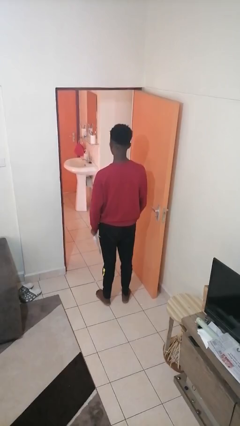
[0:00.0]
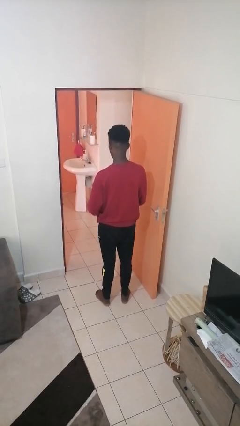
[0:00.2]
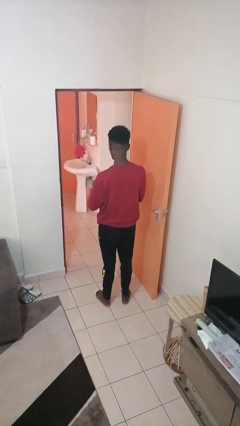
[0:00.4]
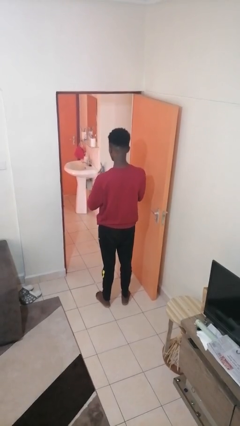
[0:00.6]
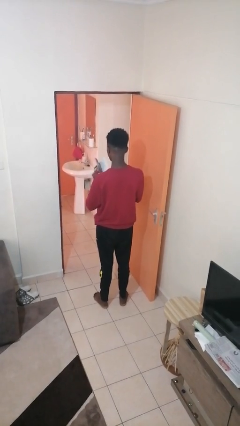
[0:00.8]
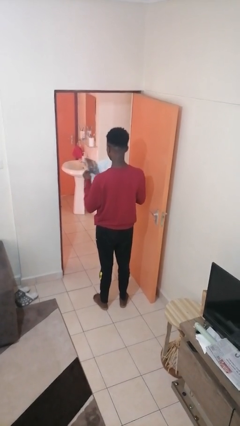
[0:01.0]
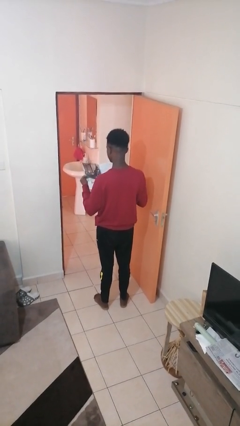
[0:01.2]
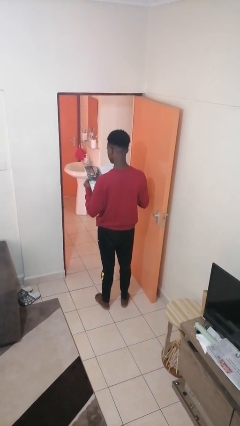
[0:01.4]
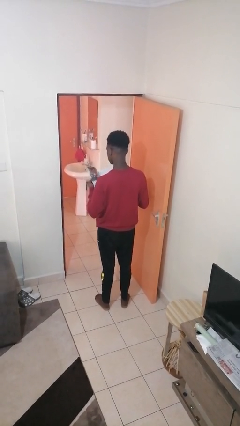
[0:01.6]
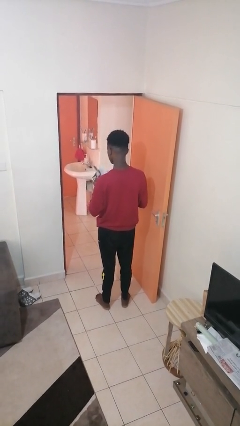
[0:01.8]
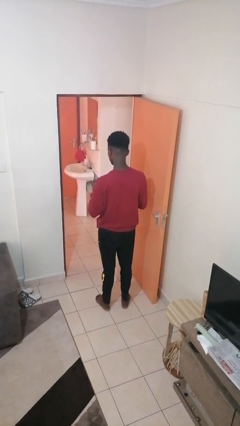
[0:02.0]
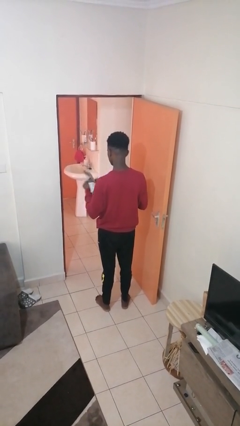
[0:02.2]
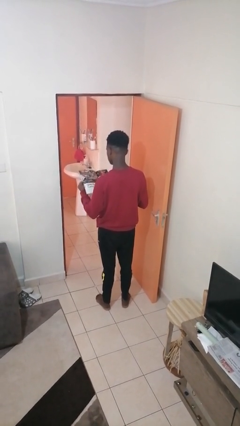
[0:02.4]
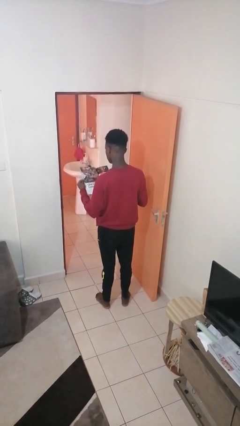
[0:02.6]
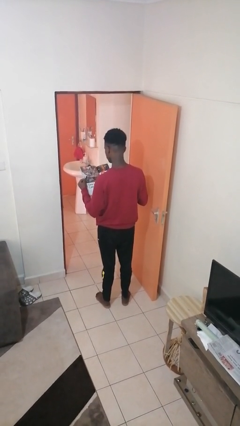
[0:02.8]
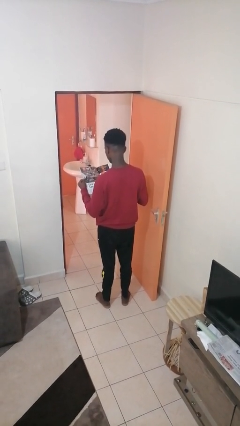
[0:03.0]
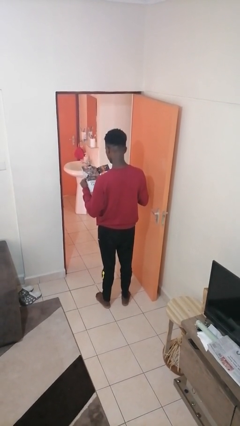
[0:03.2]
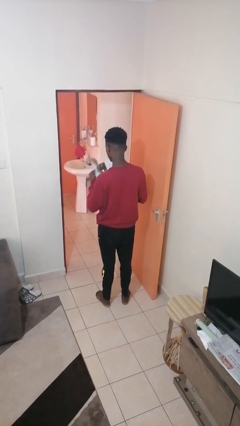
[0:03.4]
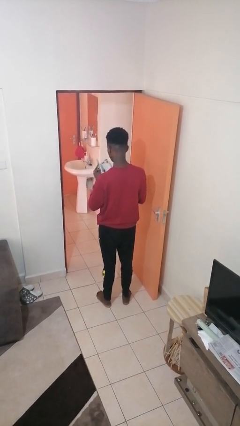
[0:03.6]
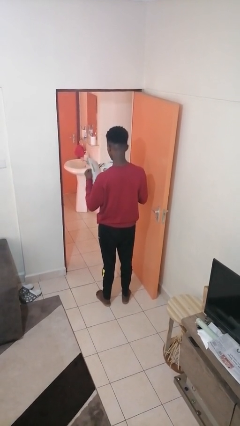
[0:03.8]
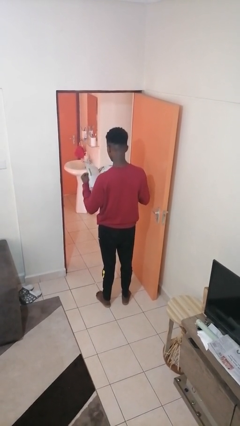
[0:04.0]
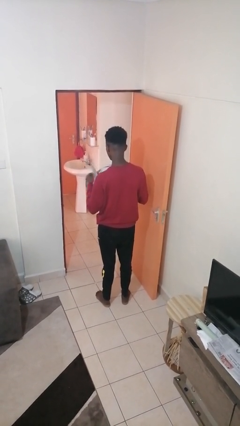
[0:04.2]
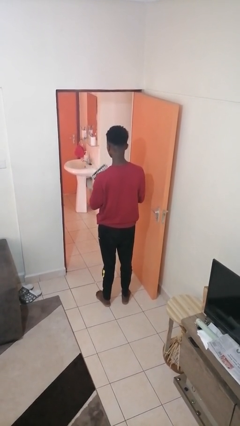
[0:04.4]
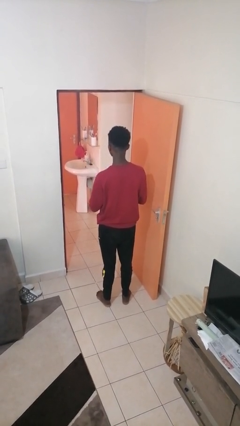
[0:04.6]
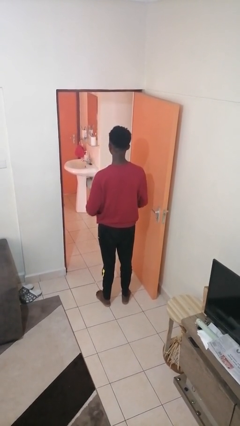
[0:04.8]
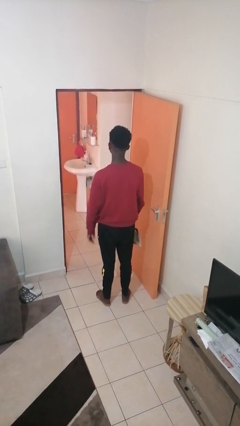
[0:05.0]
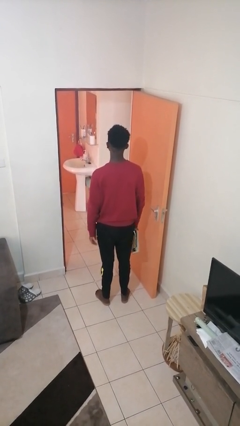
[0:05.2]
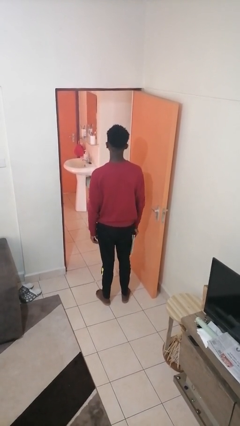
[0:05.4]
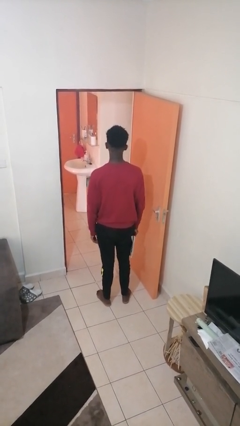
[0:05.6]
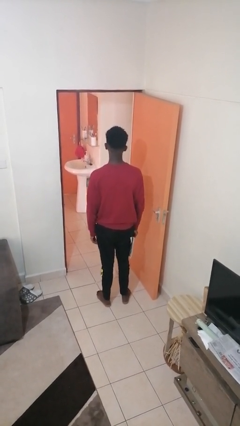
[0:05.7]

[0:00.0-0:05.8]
person reads magazine

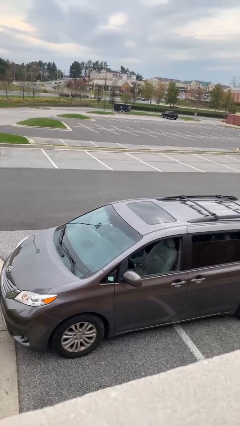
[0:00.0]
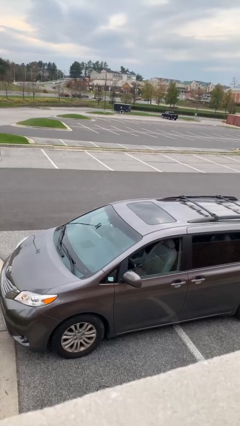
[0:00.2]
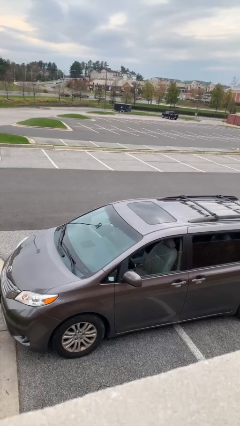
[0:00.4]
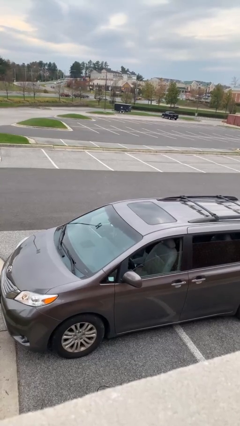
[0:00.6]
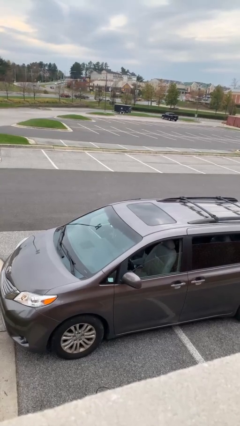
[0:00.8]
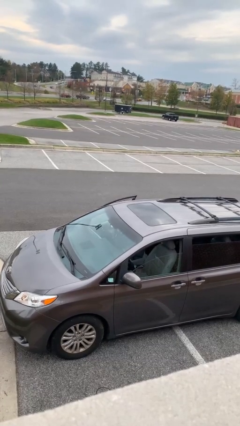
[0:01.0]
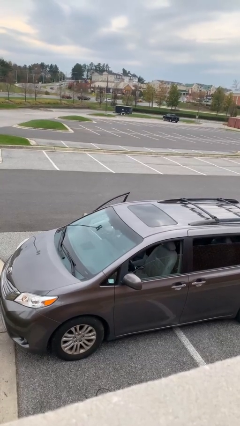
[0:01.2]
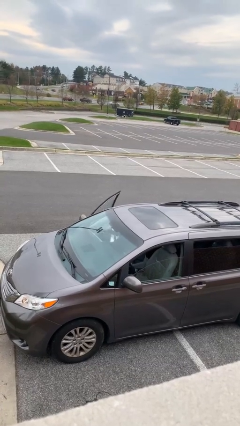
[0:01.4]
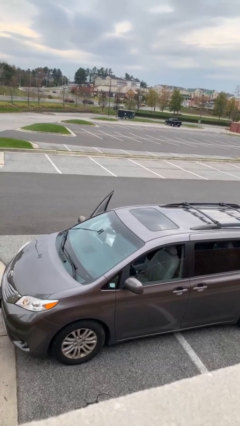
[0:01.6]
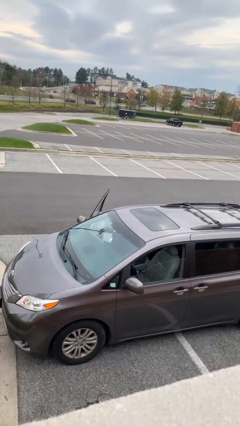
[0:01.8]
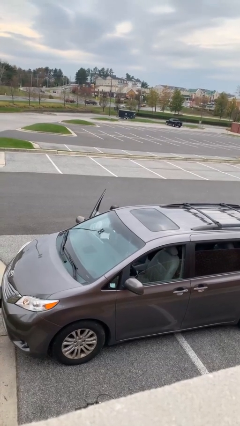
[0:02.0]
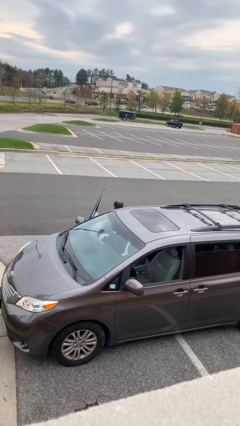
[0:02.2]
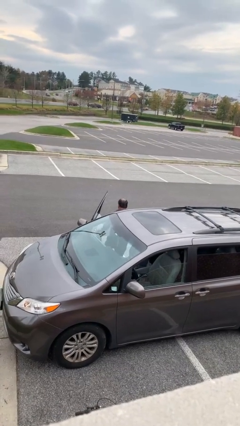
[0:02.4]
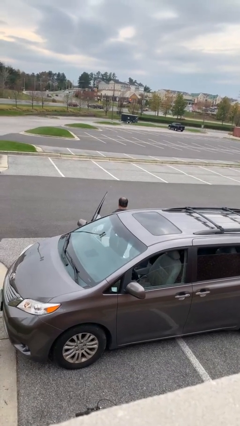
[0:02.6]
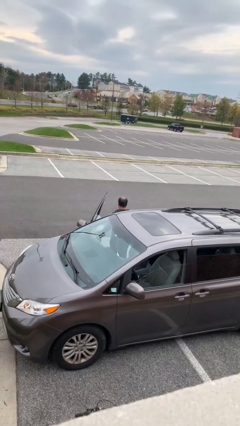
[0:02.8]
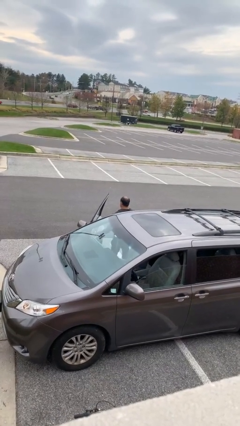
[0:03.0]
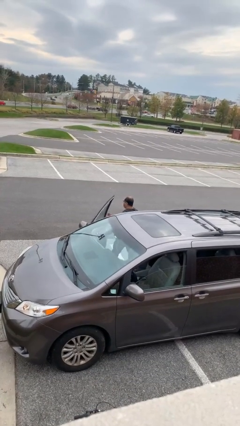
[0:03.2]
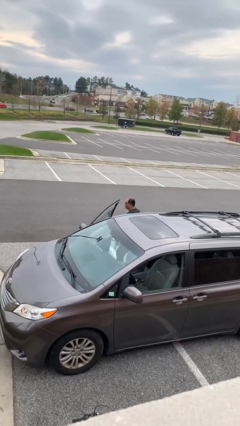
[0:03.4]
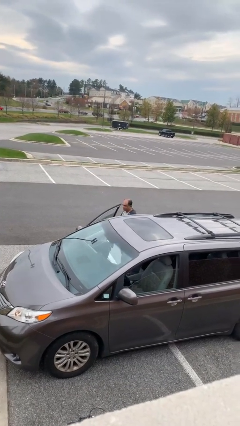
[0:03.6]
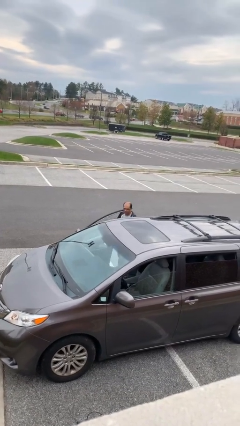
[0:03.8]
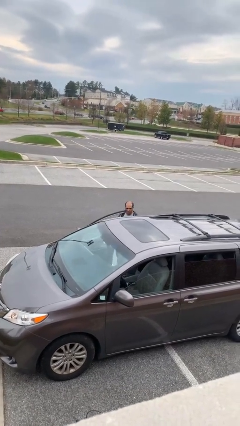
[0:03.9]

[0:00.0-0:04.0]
car drops off person

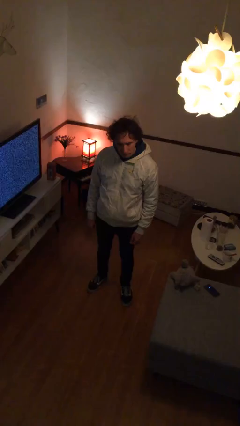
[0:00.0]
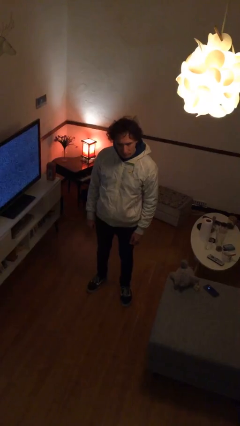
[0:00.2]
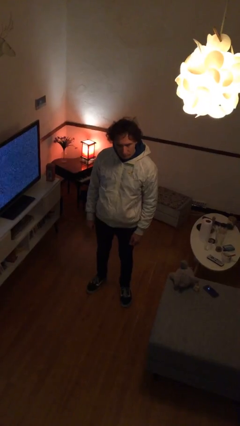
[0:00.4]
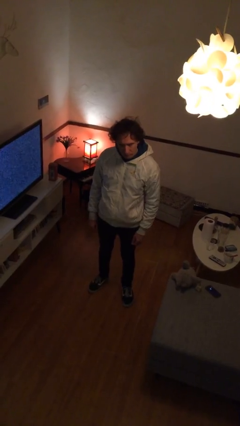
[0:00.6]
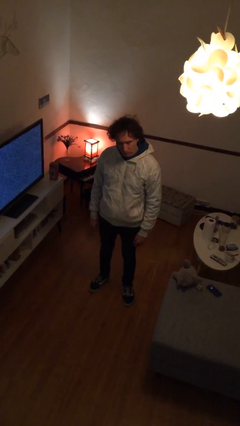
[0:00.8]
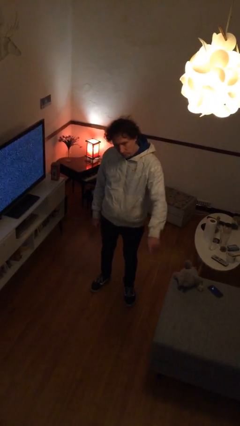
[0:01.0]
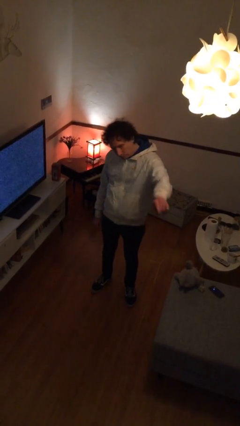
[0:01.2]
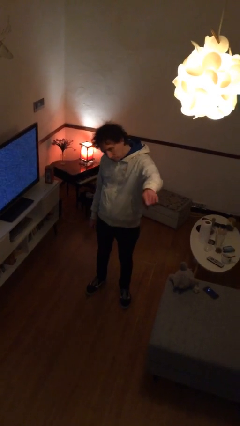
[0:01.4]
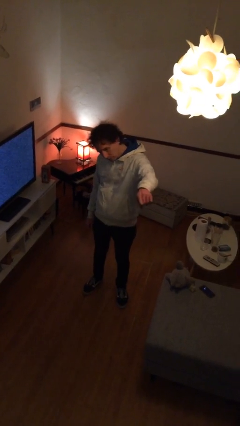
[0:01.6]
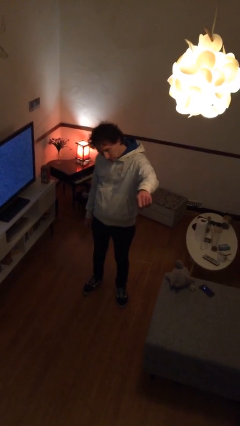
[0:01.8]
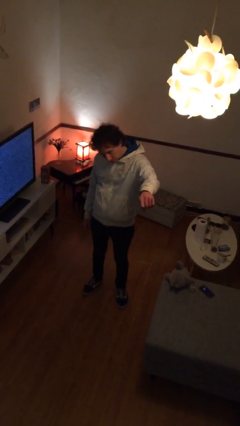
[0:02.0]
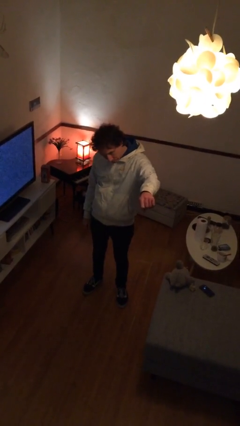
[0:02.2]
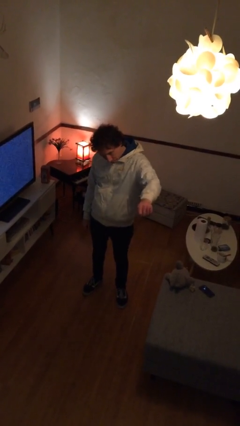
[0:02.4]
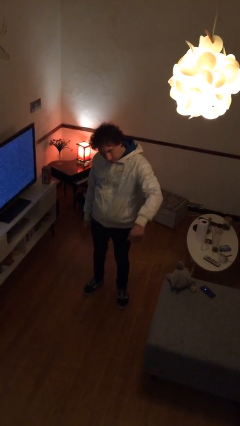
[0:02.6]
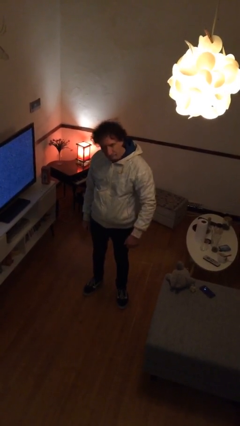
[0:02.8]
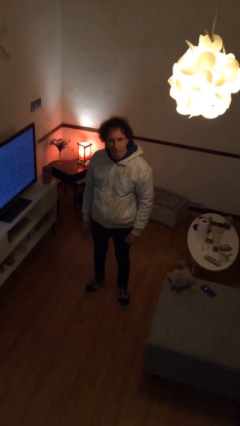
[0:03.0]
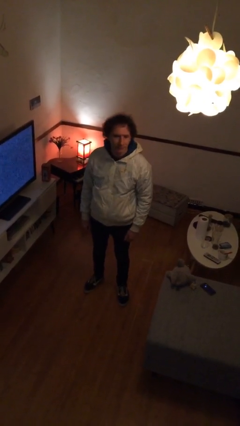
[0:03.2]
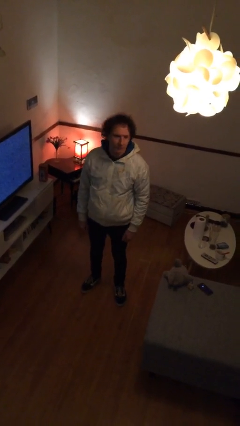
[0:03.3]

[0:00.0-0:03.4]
person points at person

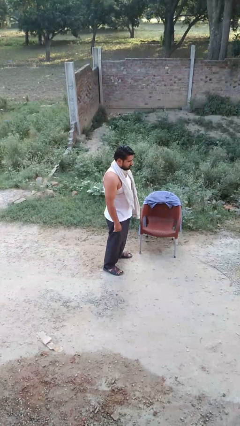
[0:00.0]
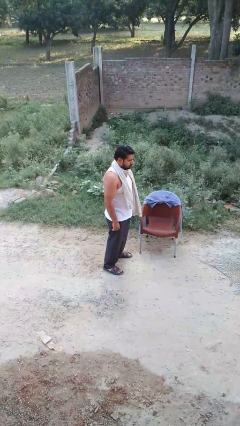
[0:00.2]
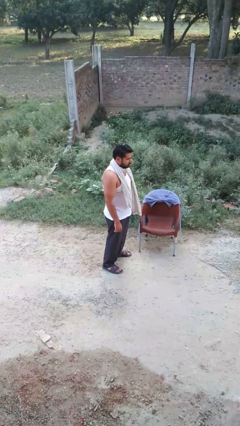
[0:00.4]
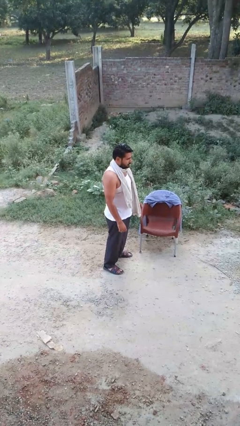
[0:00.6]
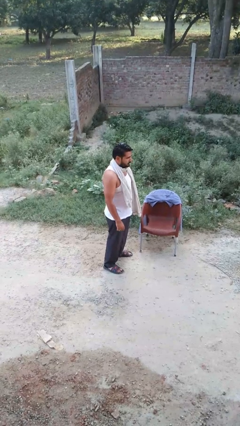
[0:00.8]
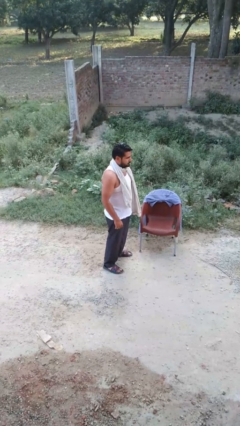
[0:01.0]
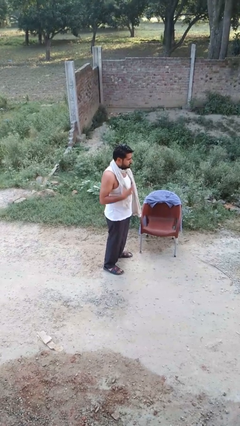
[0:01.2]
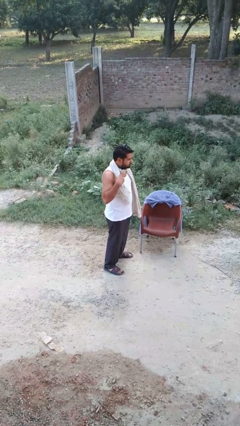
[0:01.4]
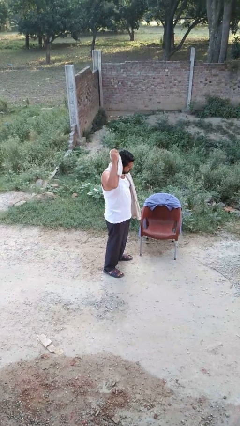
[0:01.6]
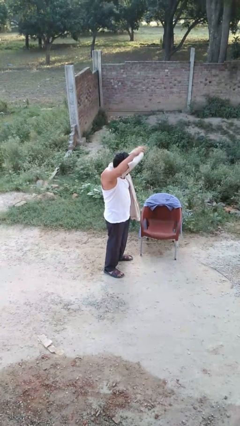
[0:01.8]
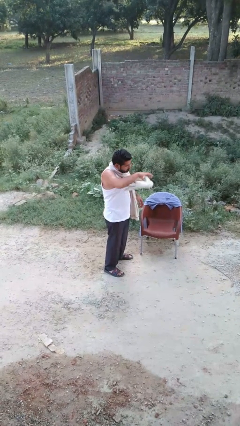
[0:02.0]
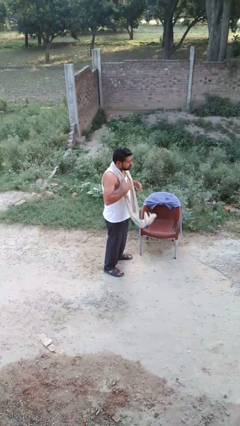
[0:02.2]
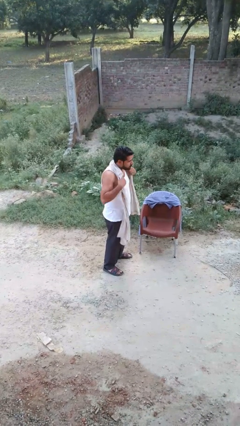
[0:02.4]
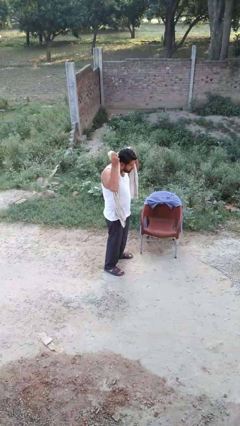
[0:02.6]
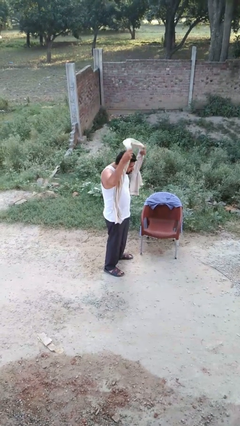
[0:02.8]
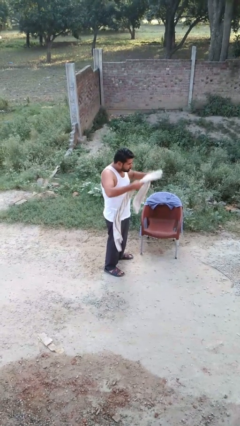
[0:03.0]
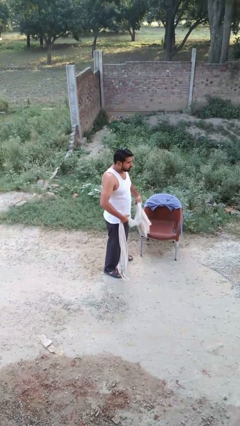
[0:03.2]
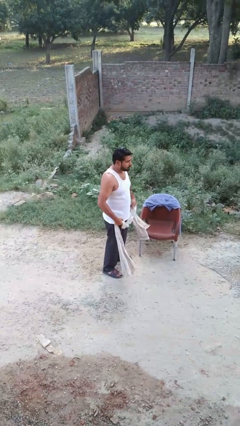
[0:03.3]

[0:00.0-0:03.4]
person takes off scarf

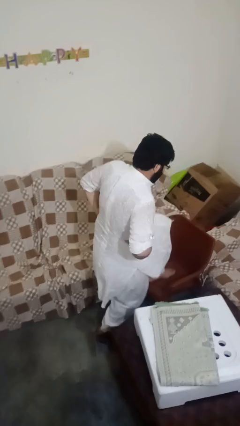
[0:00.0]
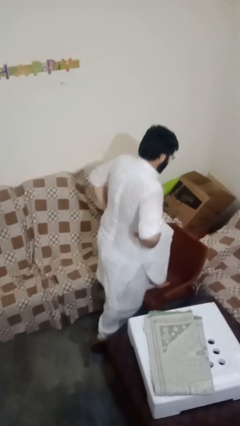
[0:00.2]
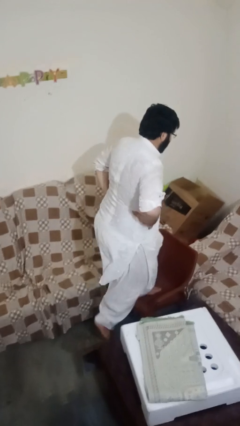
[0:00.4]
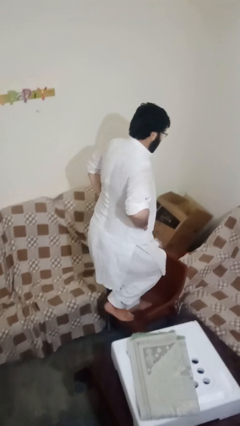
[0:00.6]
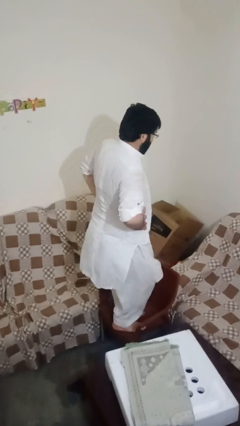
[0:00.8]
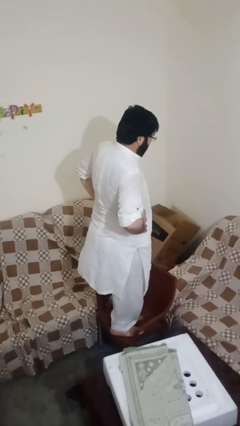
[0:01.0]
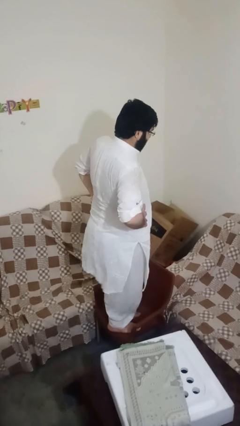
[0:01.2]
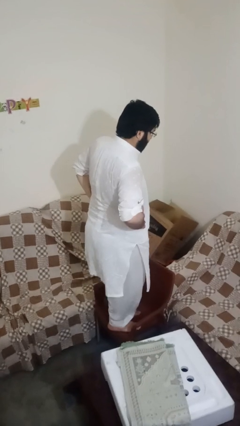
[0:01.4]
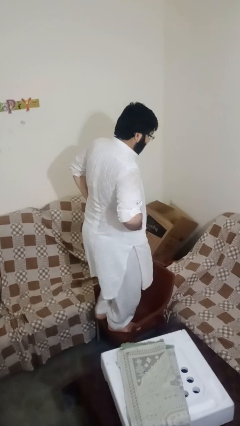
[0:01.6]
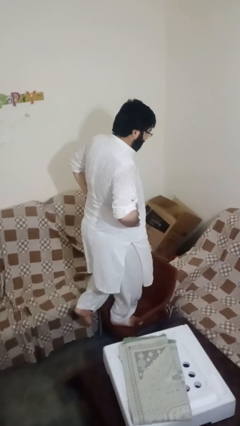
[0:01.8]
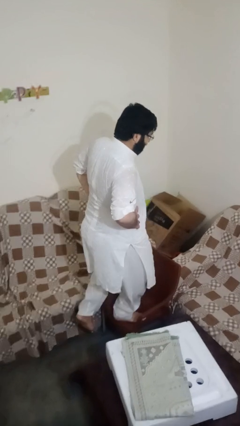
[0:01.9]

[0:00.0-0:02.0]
person climbs on chair
